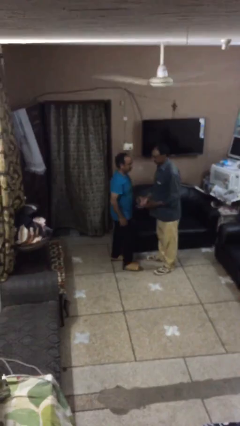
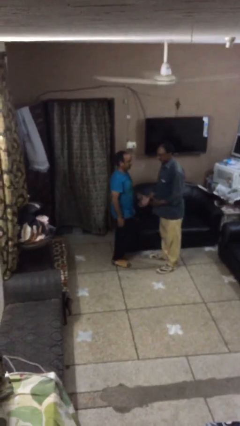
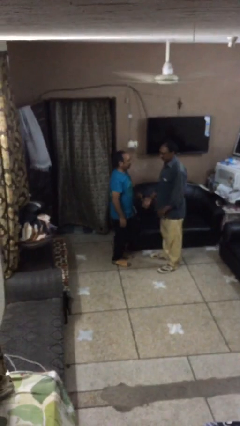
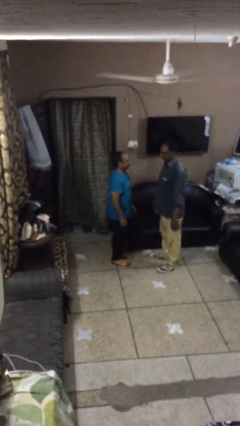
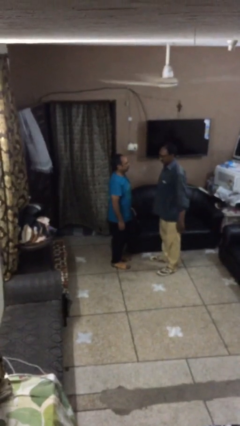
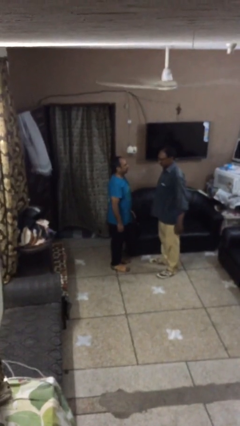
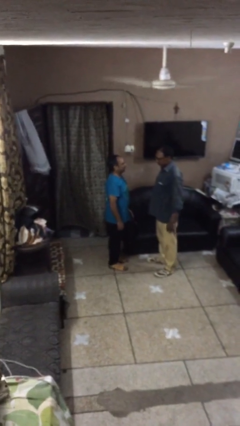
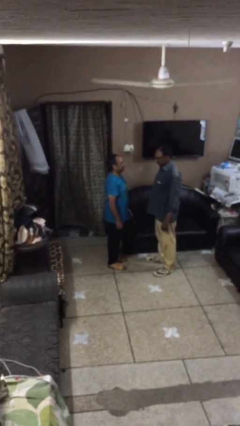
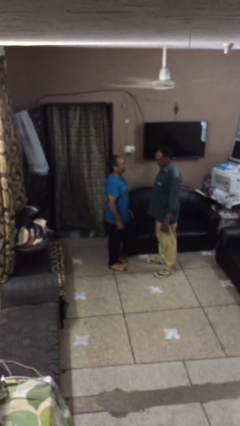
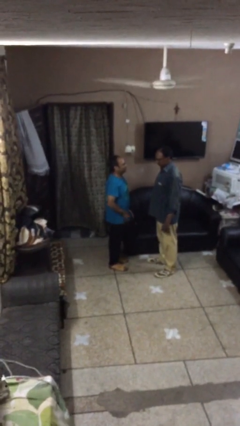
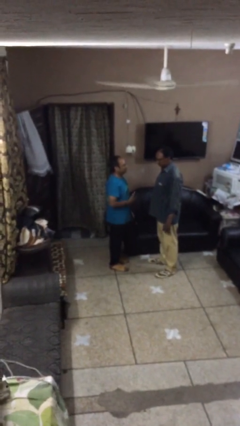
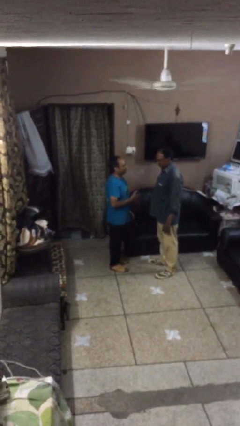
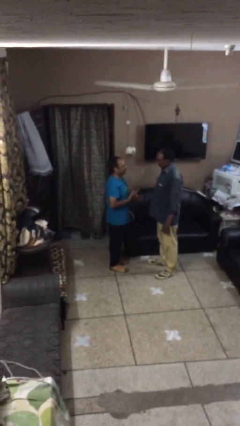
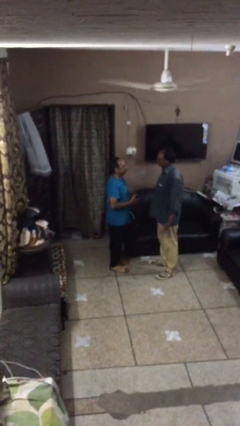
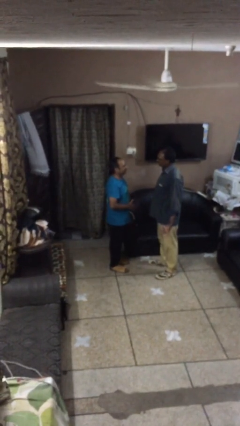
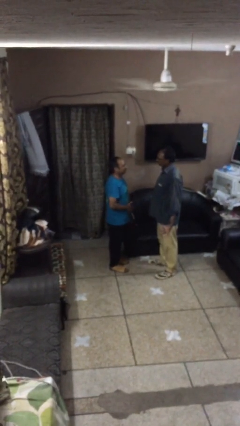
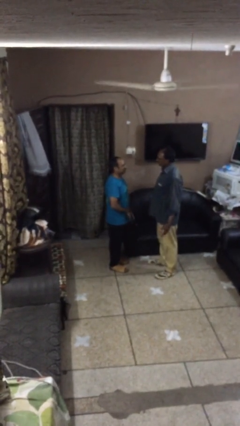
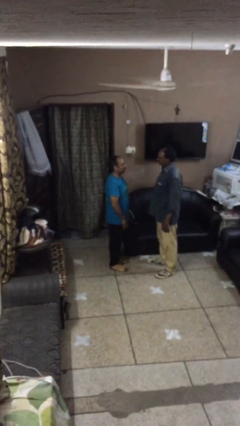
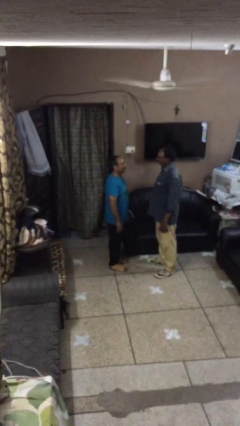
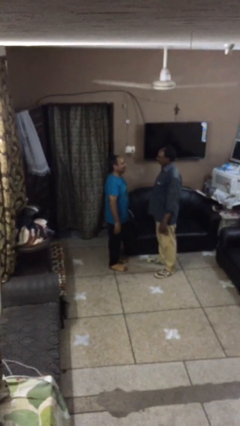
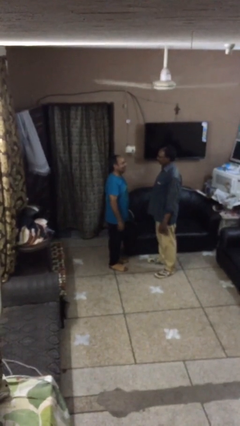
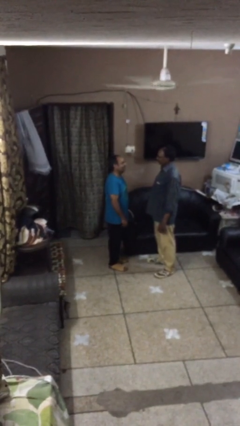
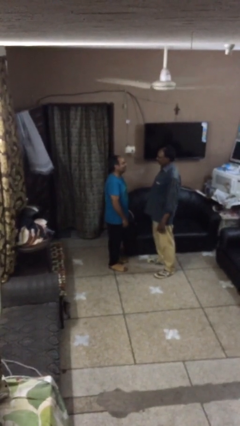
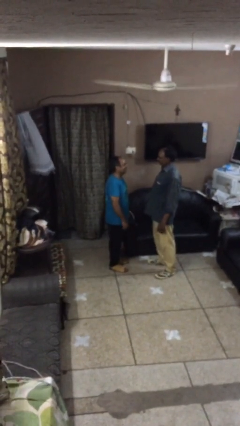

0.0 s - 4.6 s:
person talks to person

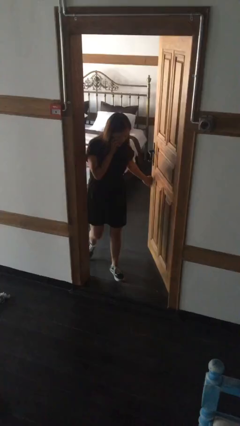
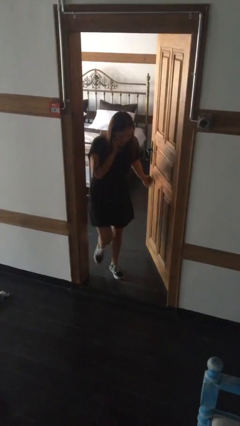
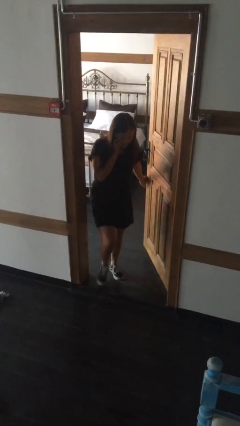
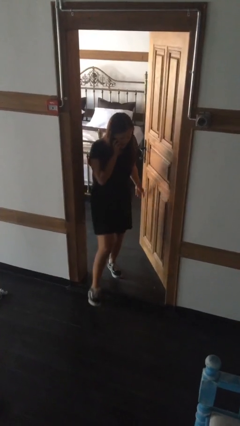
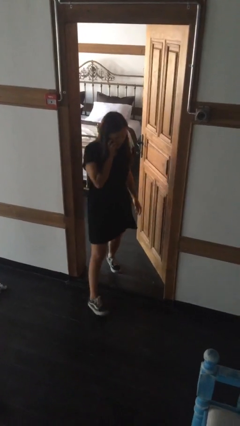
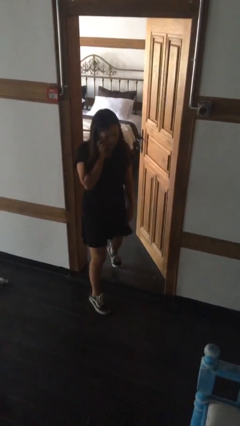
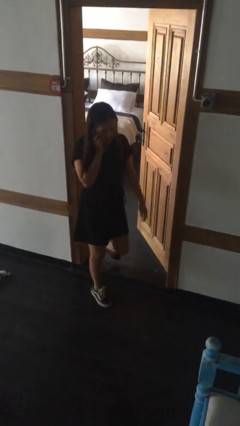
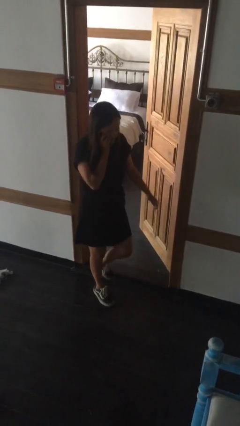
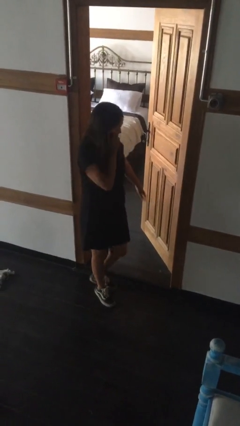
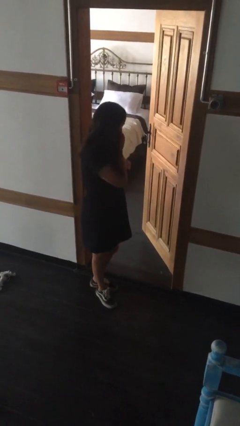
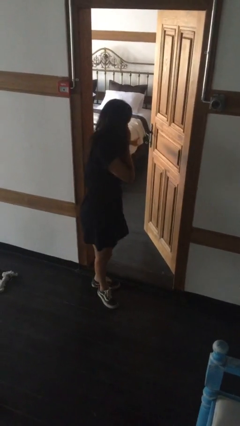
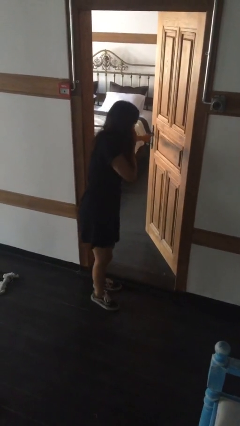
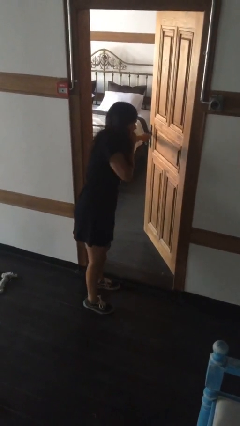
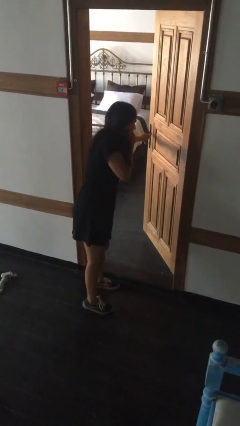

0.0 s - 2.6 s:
person enters scene through structure

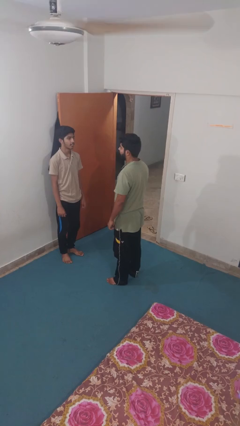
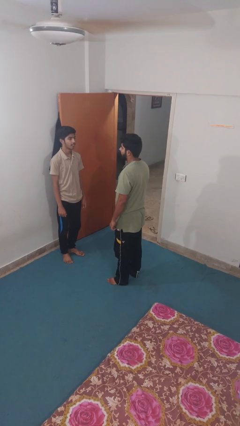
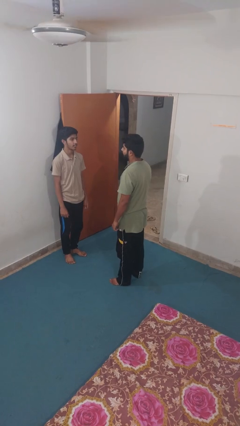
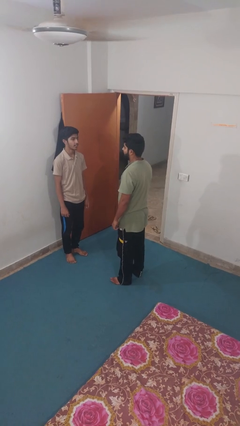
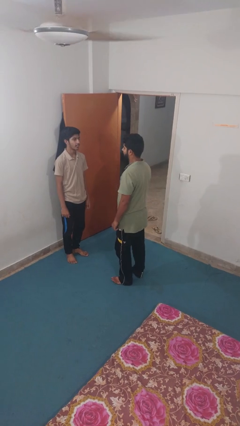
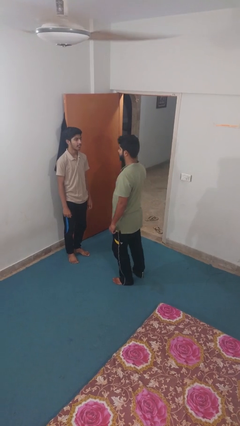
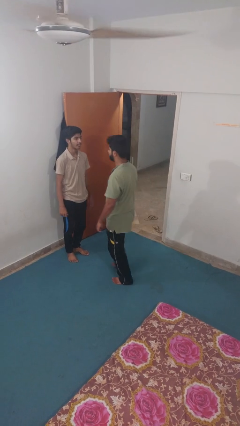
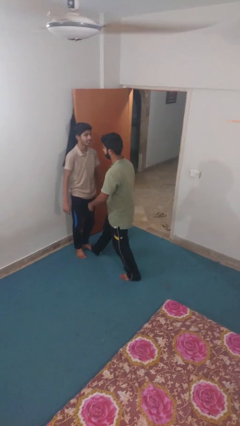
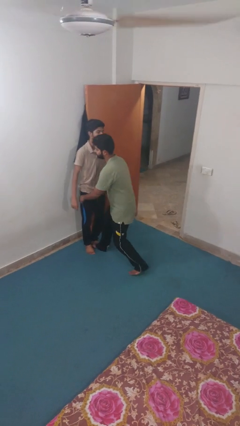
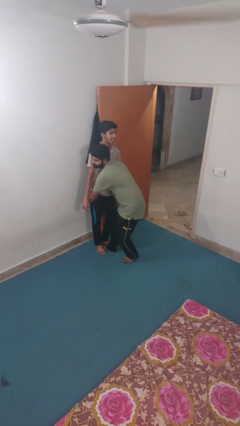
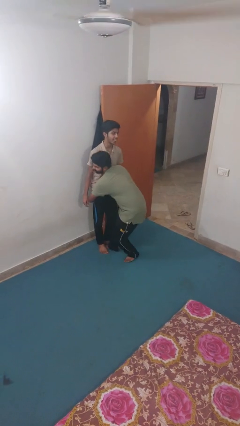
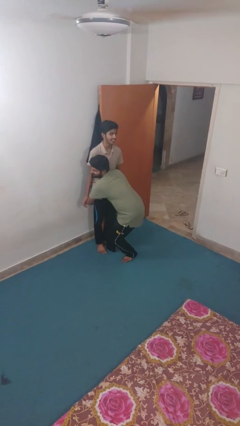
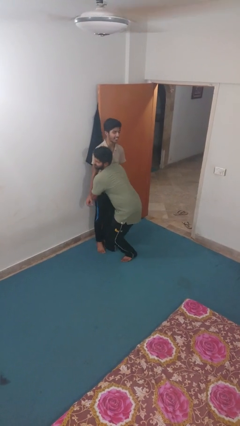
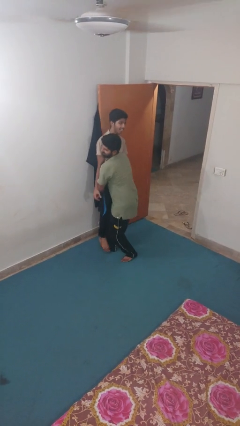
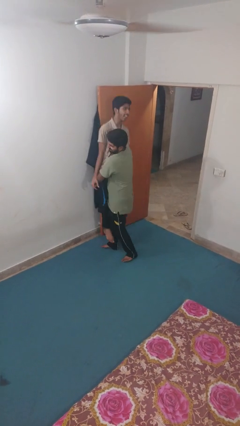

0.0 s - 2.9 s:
person picks up person

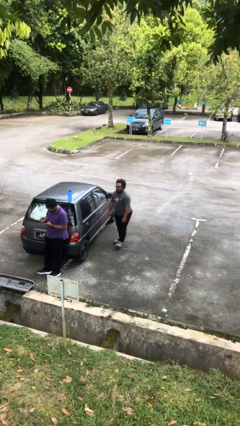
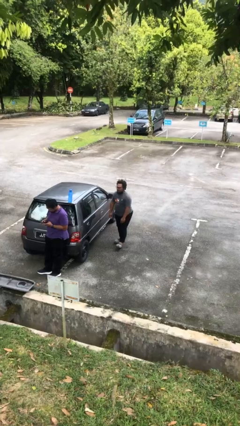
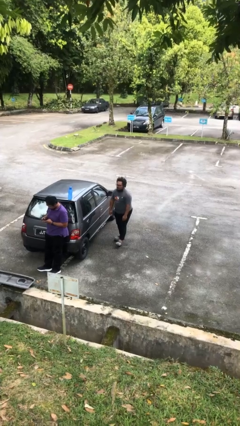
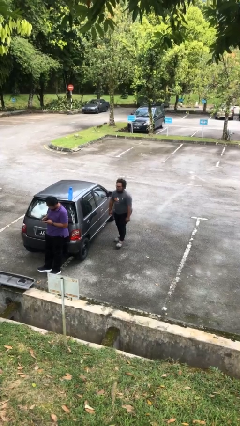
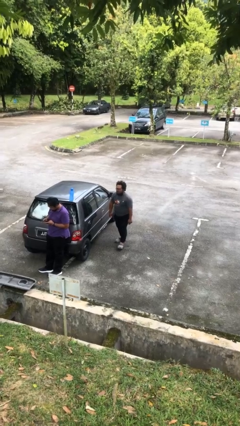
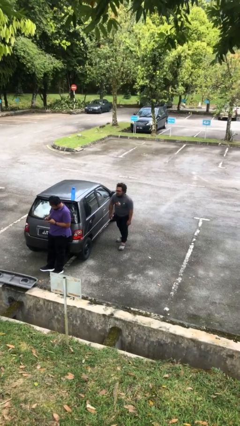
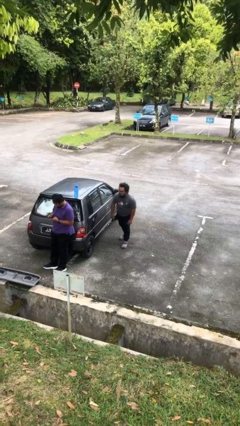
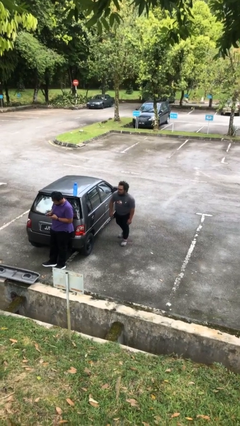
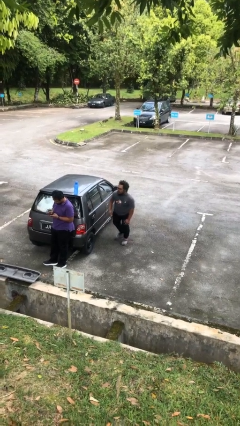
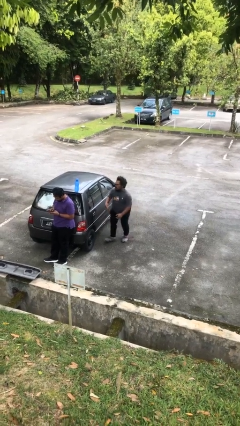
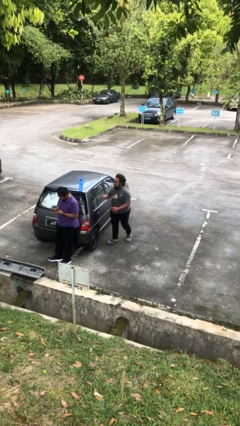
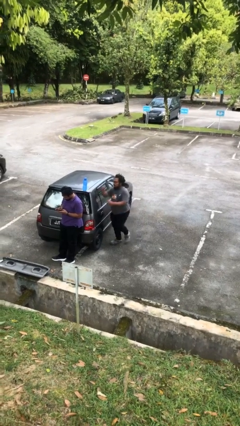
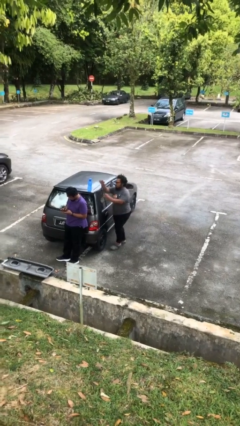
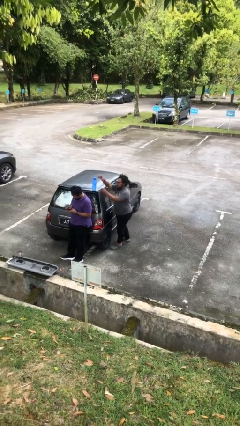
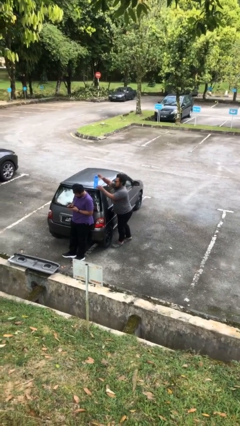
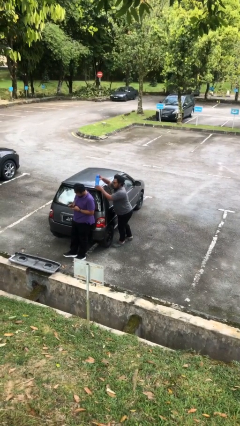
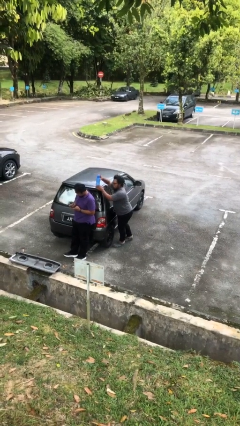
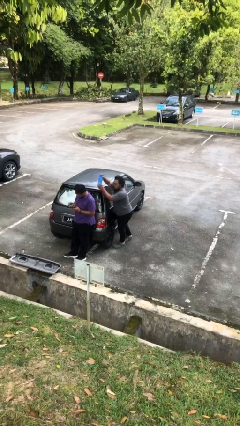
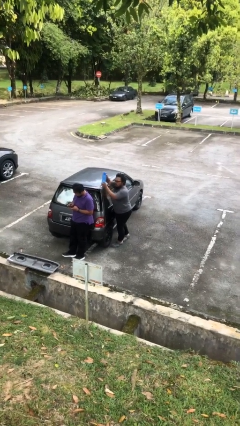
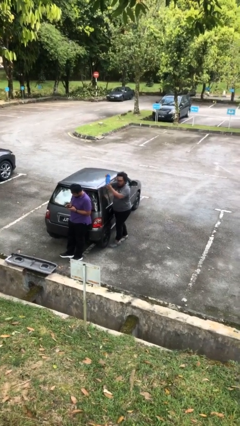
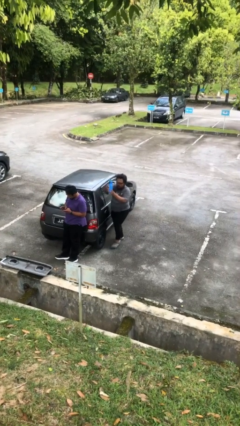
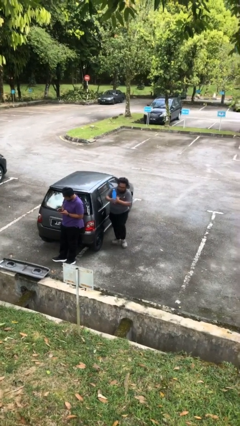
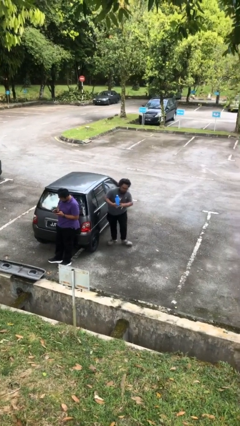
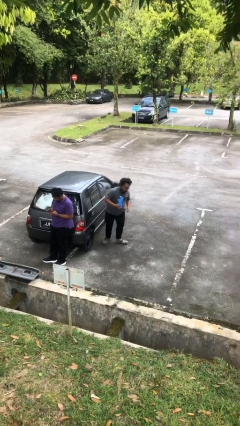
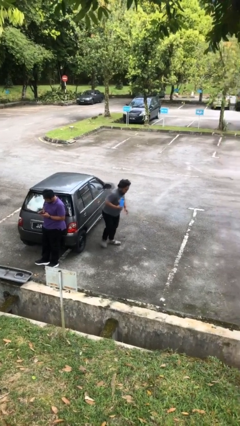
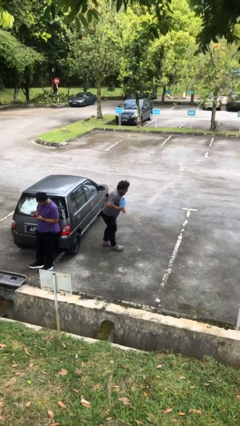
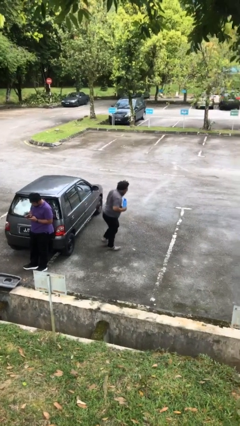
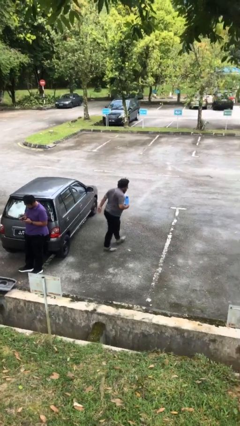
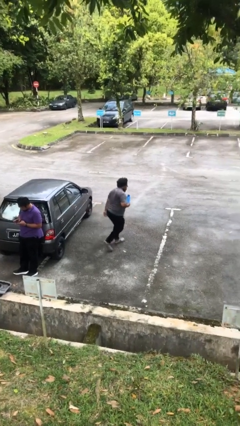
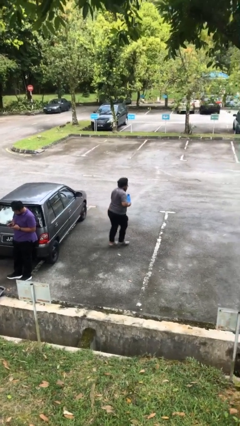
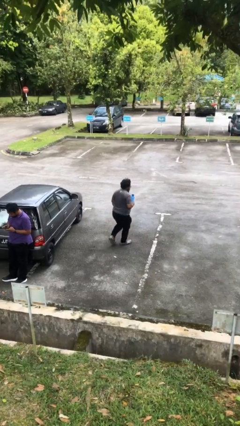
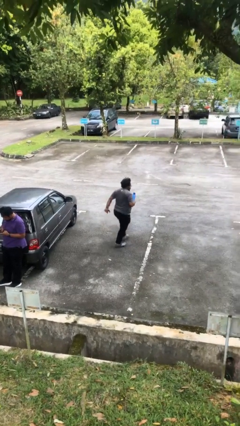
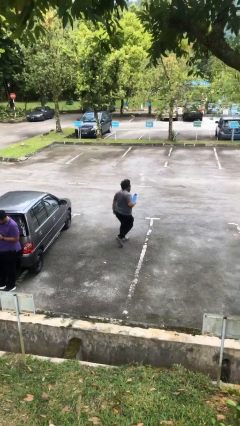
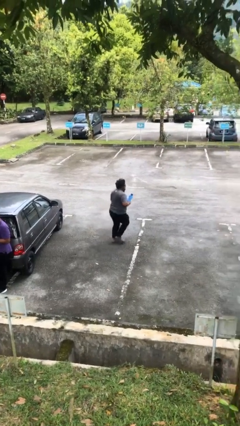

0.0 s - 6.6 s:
person steals object from person

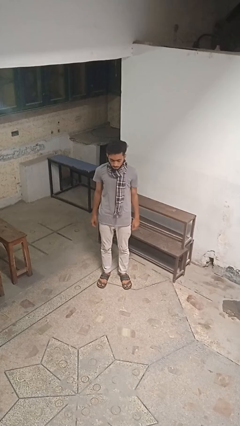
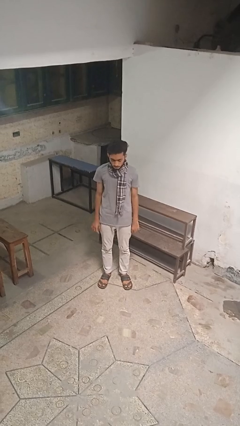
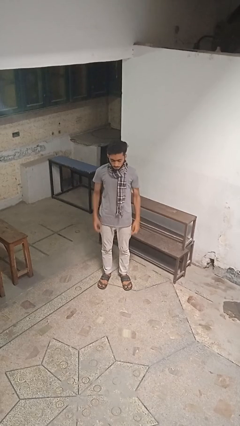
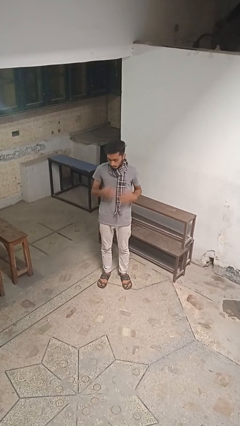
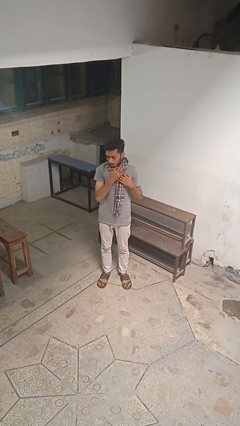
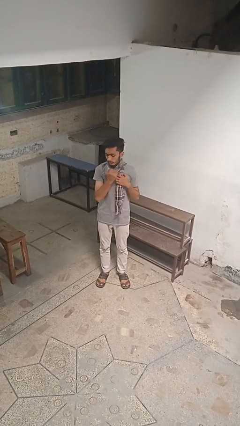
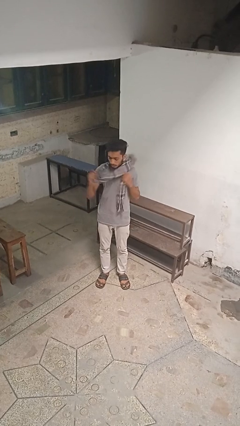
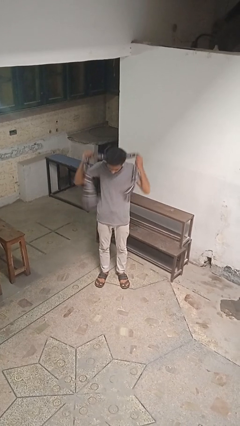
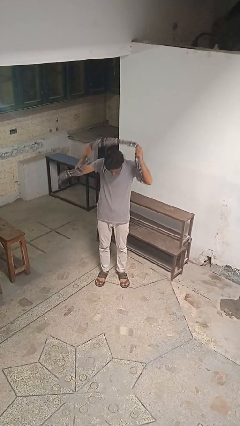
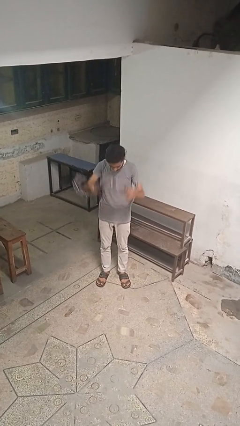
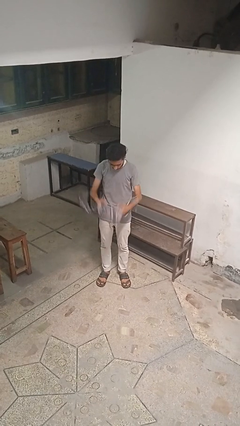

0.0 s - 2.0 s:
person takes off scarf
